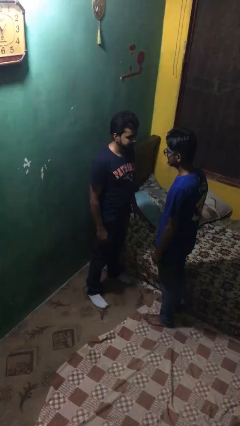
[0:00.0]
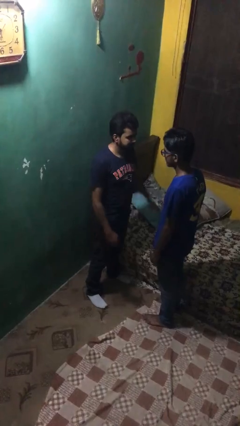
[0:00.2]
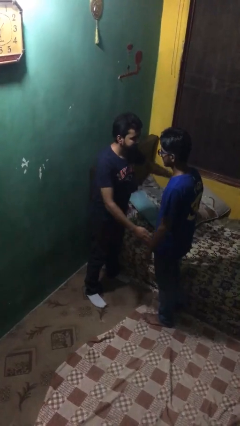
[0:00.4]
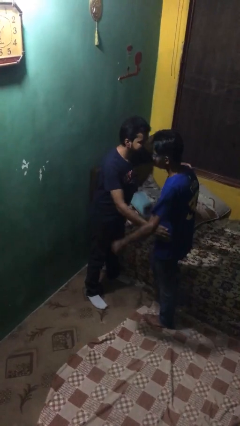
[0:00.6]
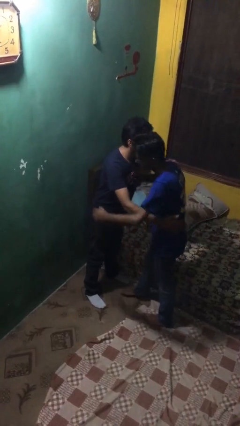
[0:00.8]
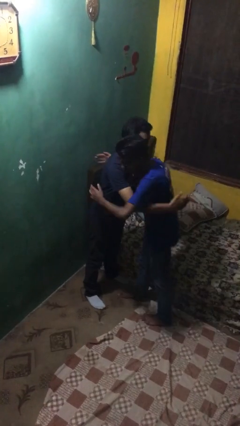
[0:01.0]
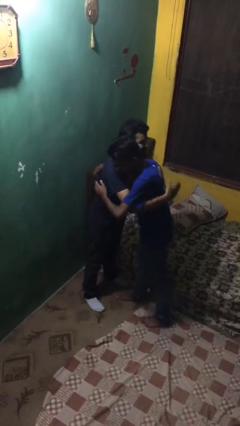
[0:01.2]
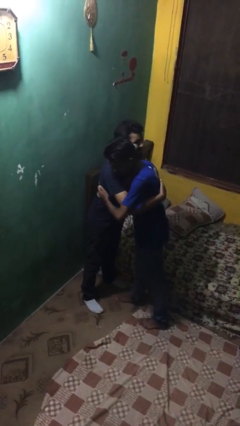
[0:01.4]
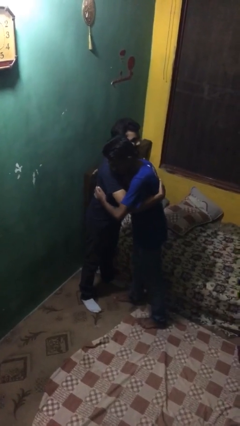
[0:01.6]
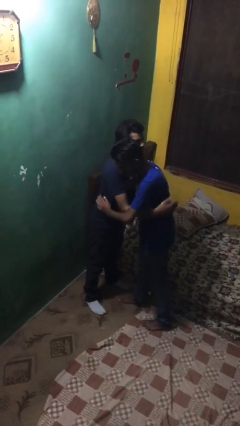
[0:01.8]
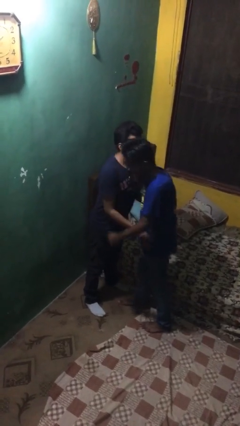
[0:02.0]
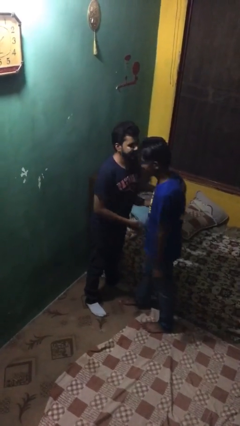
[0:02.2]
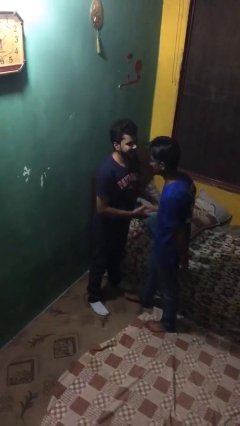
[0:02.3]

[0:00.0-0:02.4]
person embraces person

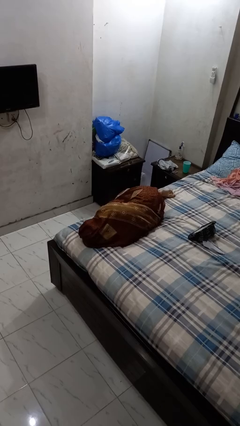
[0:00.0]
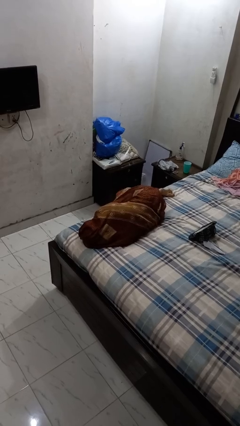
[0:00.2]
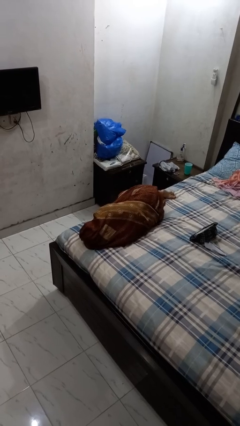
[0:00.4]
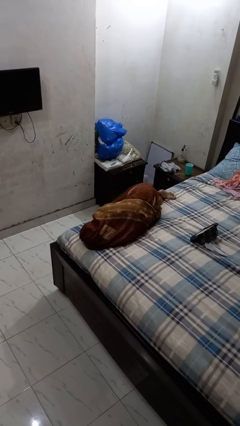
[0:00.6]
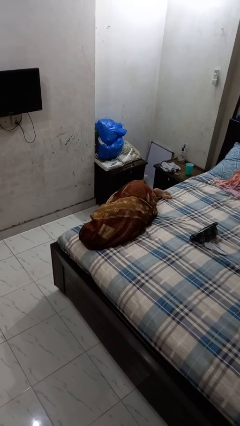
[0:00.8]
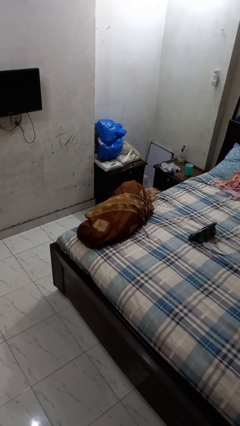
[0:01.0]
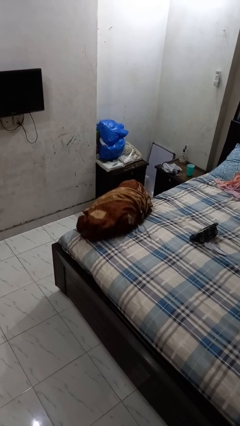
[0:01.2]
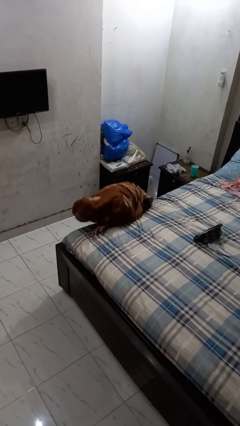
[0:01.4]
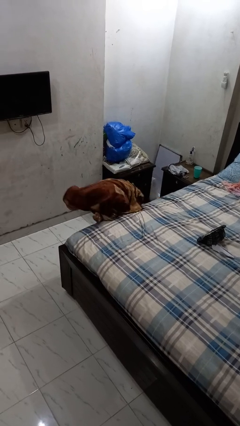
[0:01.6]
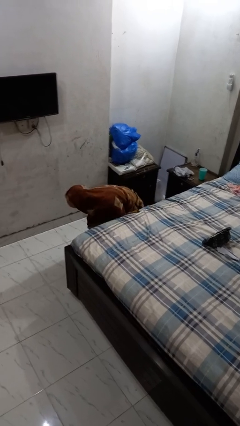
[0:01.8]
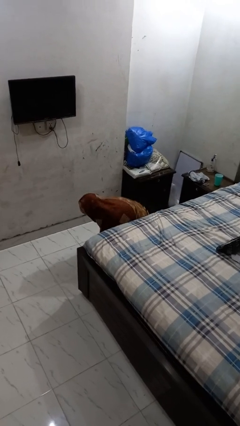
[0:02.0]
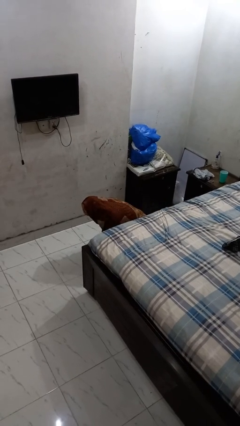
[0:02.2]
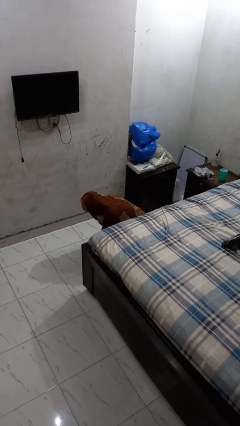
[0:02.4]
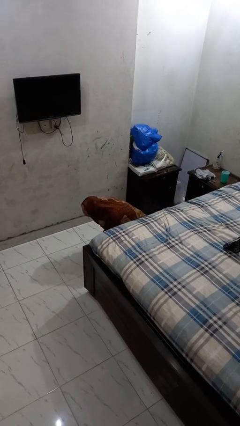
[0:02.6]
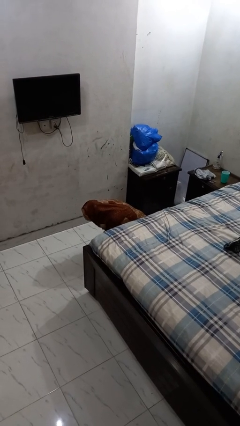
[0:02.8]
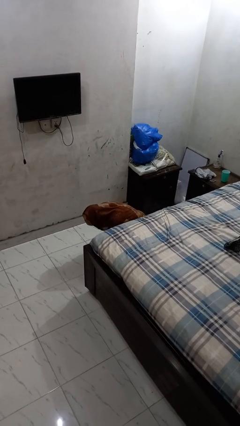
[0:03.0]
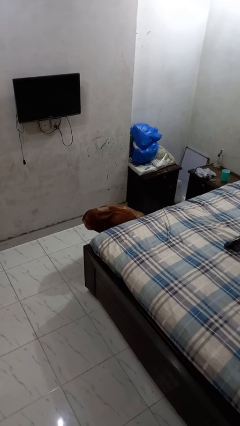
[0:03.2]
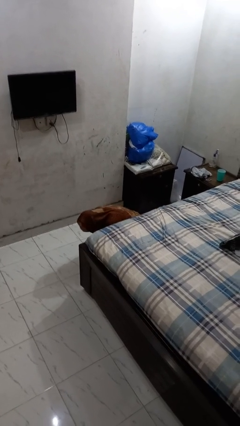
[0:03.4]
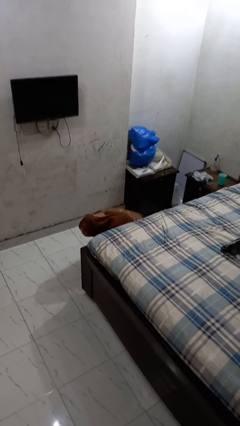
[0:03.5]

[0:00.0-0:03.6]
person falls from bed

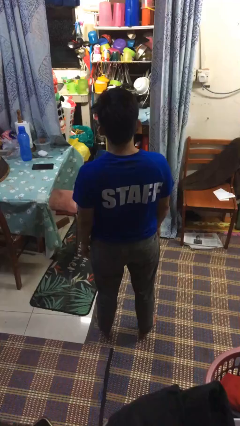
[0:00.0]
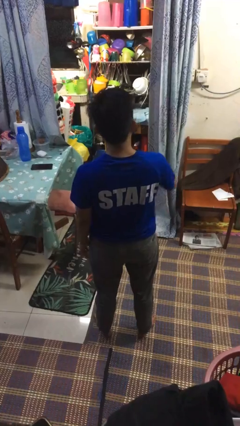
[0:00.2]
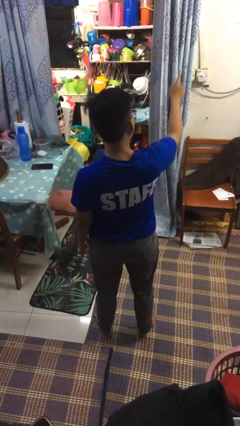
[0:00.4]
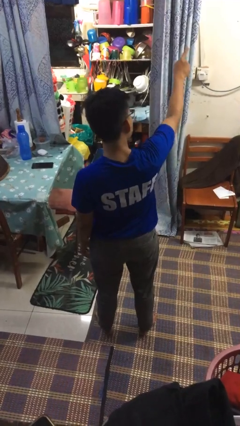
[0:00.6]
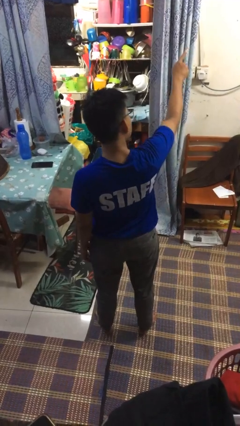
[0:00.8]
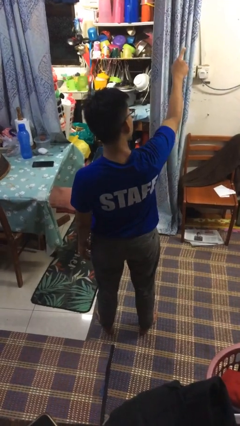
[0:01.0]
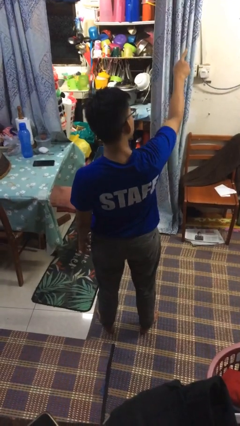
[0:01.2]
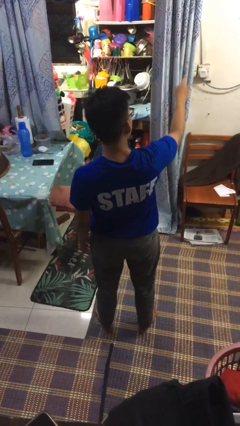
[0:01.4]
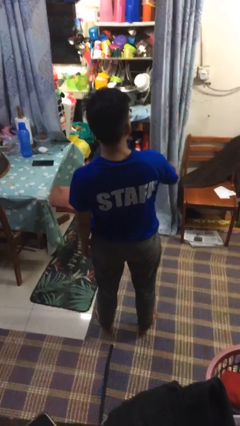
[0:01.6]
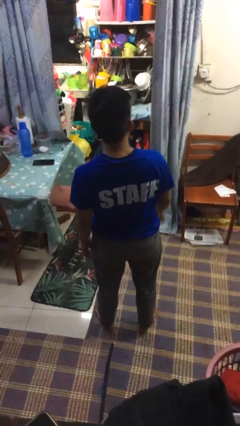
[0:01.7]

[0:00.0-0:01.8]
person points at person

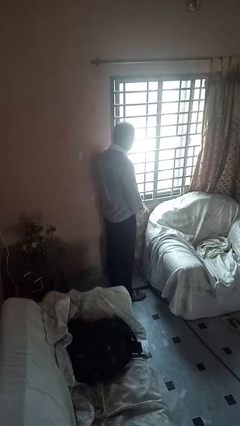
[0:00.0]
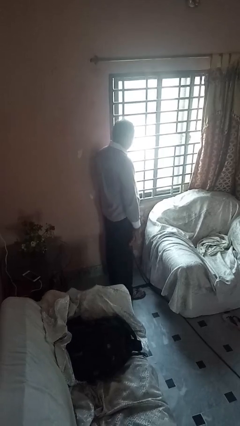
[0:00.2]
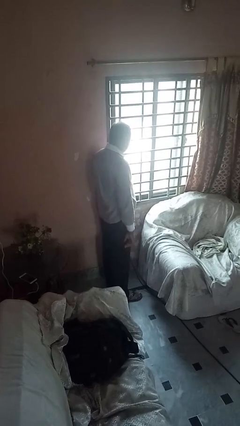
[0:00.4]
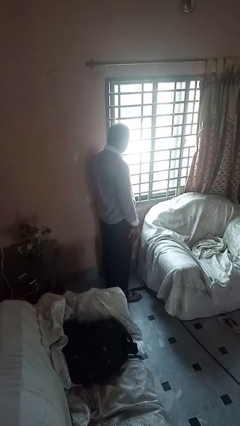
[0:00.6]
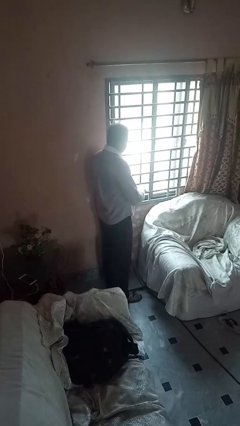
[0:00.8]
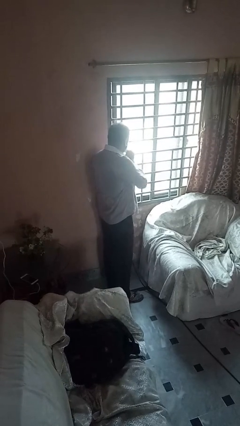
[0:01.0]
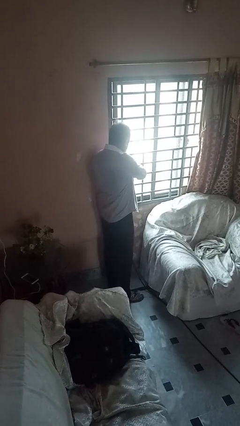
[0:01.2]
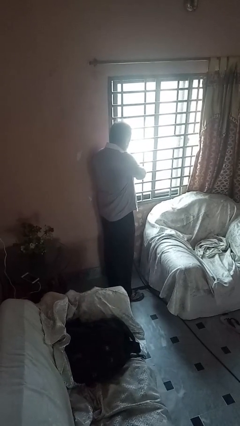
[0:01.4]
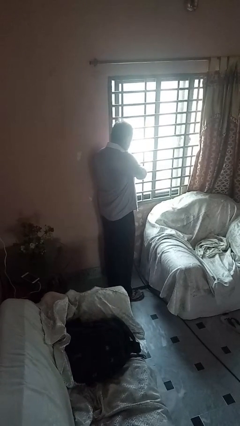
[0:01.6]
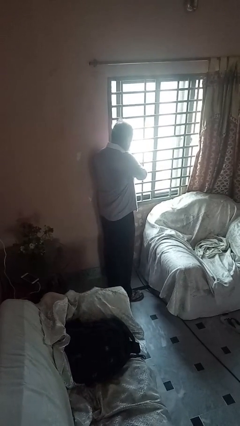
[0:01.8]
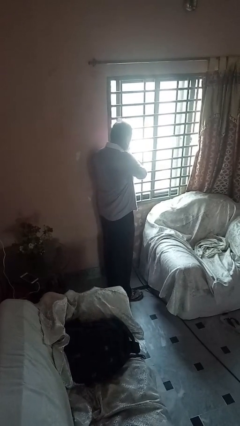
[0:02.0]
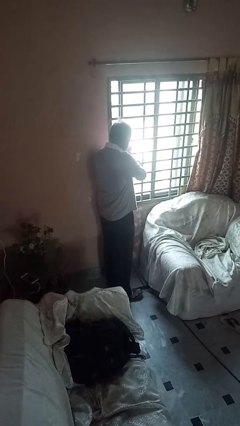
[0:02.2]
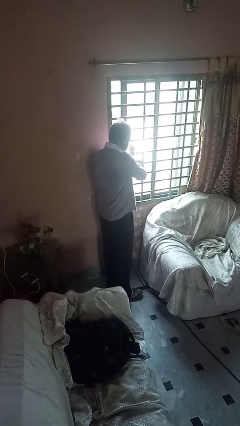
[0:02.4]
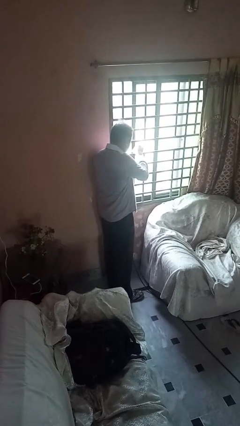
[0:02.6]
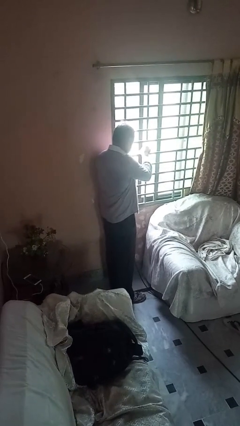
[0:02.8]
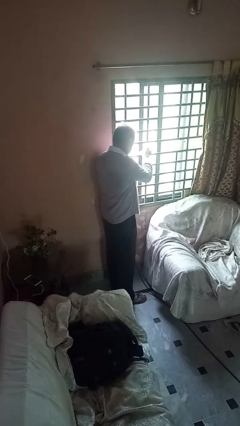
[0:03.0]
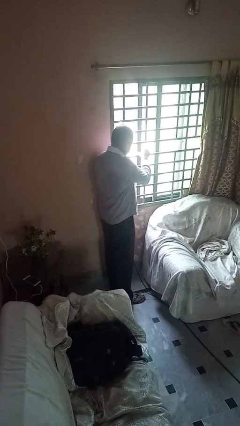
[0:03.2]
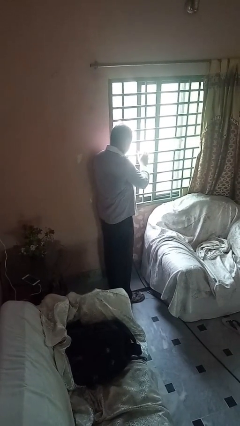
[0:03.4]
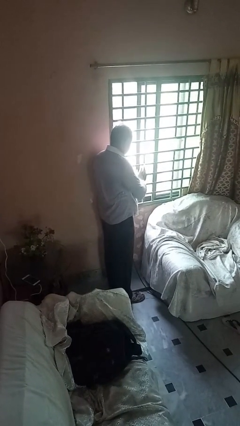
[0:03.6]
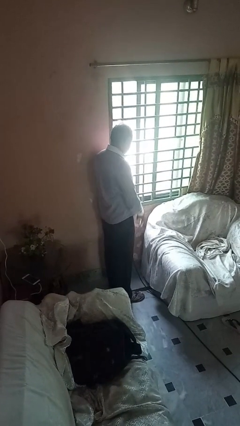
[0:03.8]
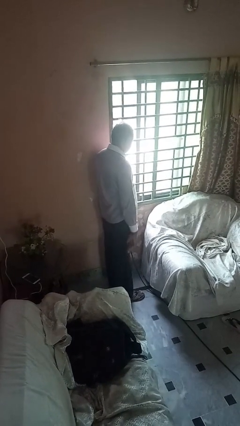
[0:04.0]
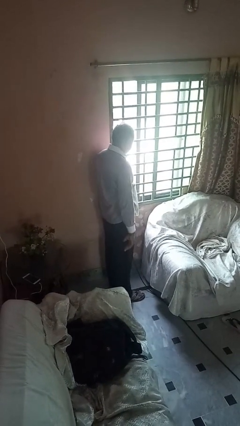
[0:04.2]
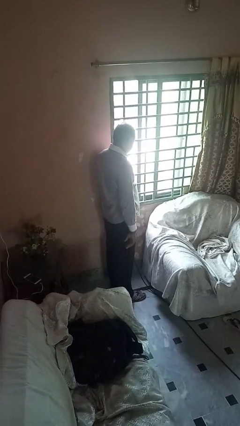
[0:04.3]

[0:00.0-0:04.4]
person opens sliding door

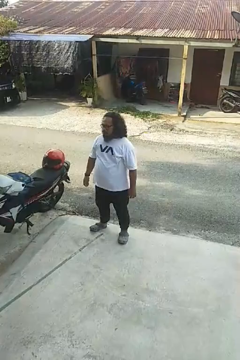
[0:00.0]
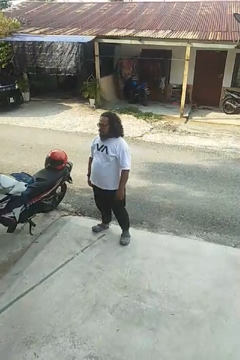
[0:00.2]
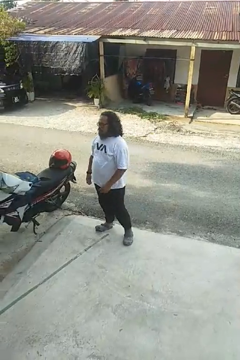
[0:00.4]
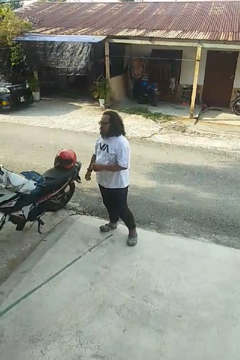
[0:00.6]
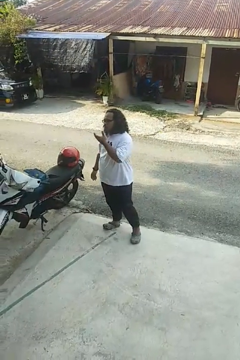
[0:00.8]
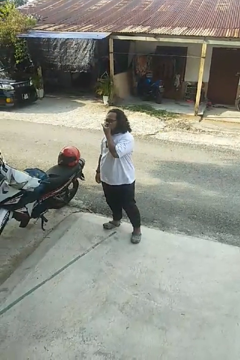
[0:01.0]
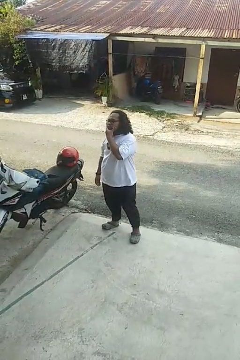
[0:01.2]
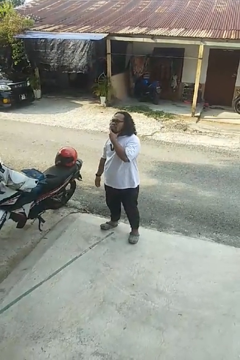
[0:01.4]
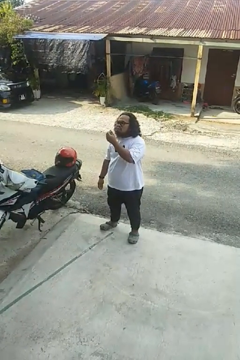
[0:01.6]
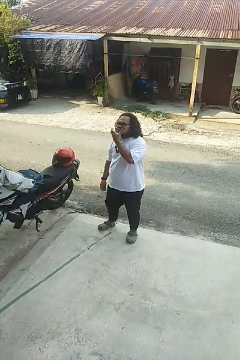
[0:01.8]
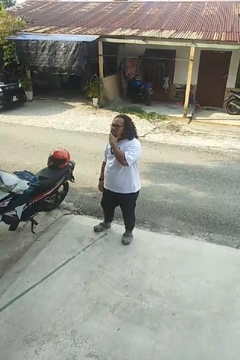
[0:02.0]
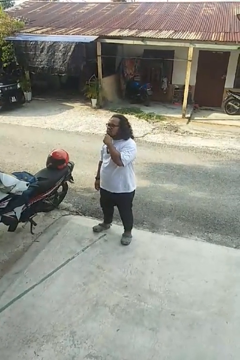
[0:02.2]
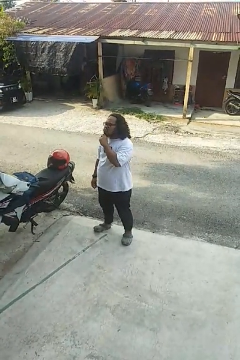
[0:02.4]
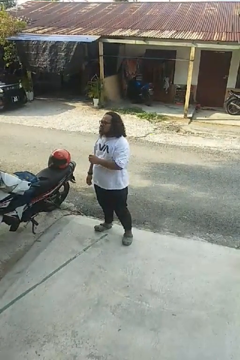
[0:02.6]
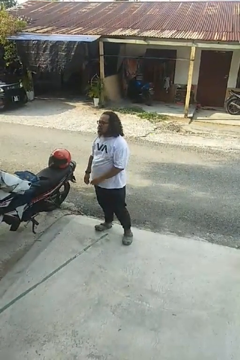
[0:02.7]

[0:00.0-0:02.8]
person scratches face

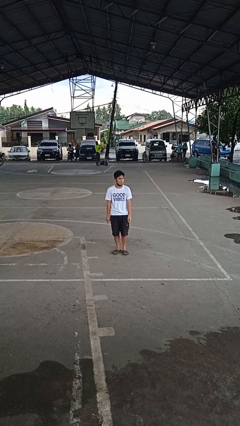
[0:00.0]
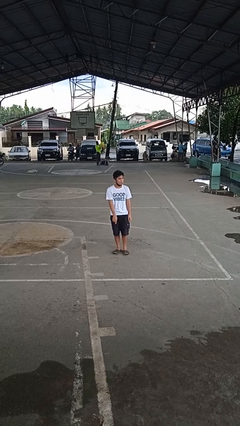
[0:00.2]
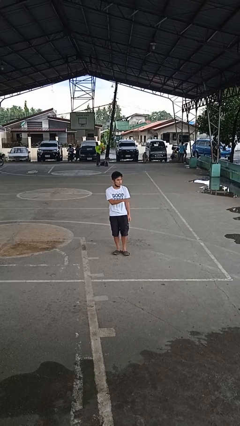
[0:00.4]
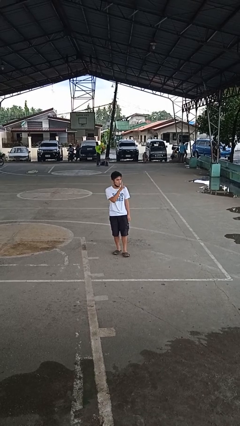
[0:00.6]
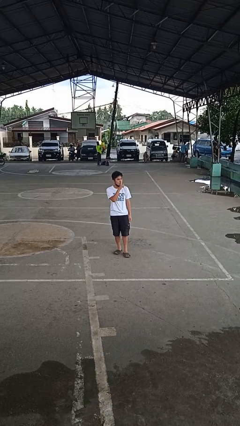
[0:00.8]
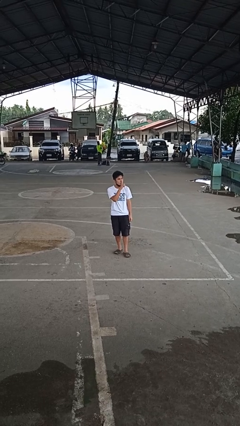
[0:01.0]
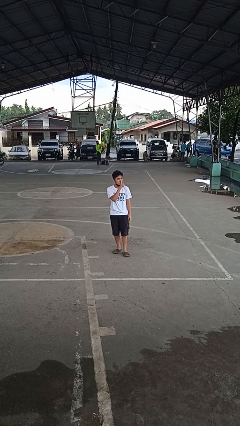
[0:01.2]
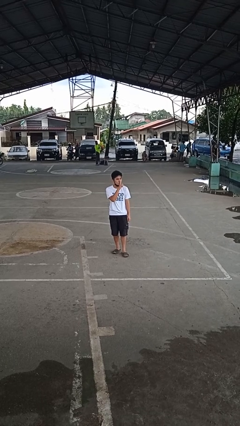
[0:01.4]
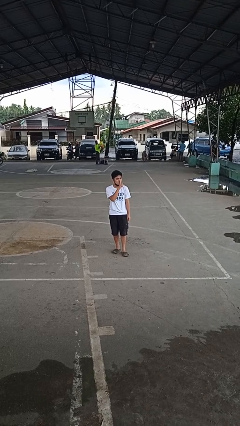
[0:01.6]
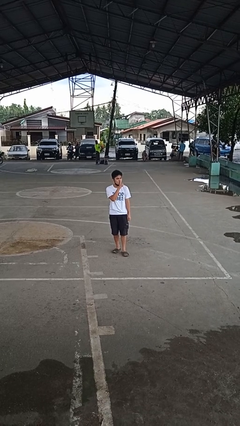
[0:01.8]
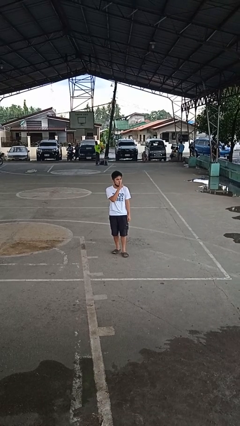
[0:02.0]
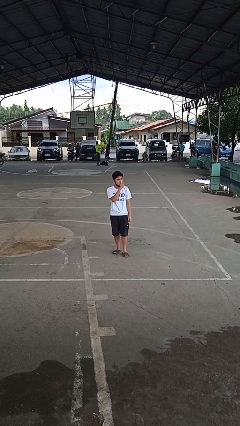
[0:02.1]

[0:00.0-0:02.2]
person gestures be quiet

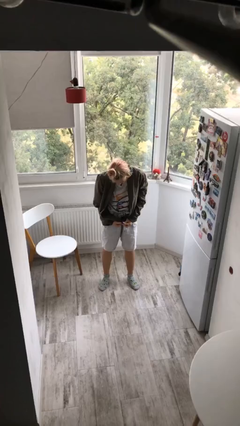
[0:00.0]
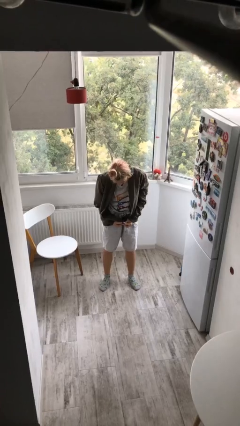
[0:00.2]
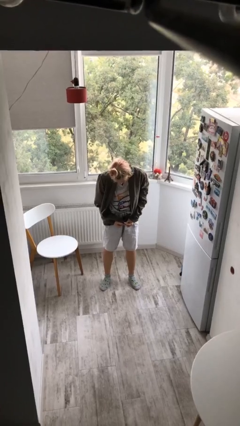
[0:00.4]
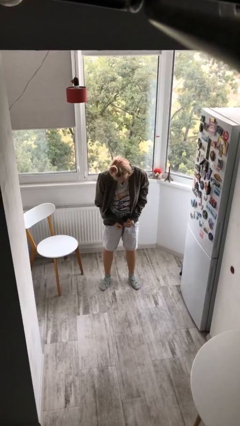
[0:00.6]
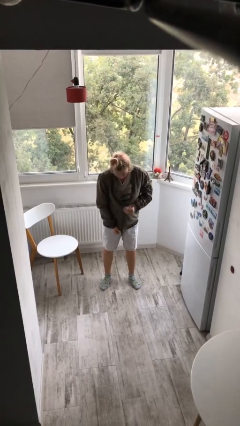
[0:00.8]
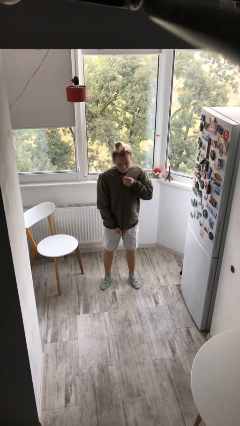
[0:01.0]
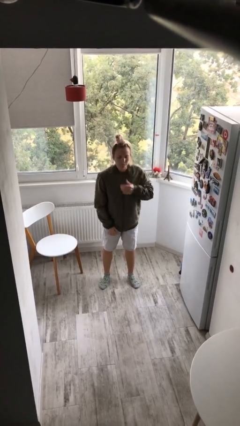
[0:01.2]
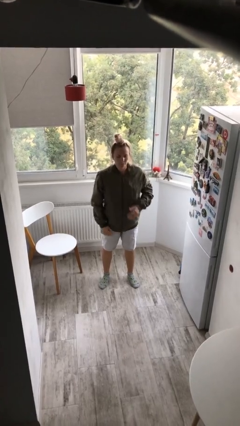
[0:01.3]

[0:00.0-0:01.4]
person zips up jacket
